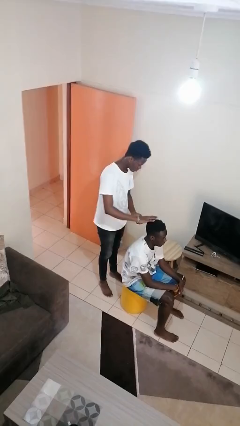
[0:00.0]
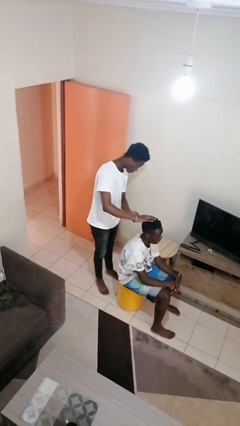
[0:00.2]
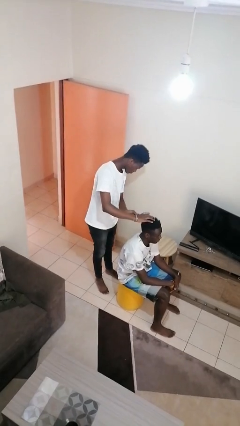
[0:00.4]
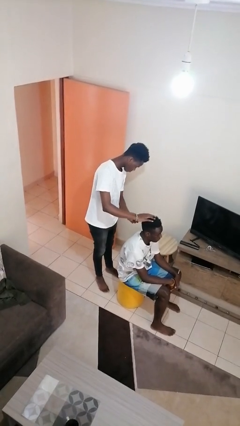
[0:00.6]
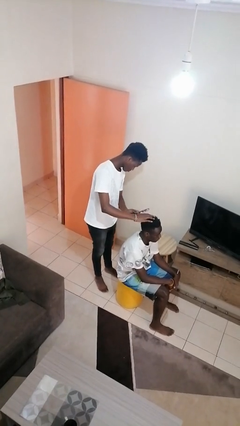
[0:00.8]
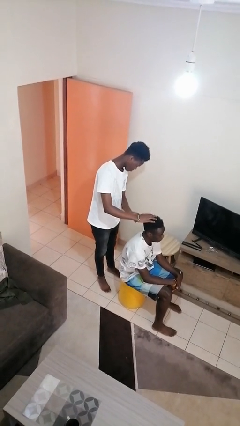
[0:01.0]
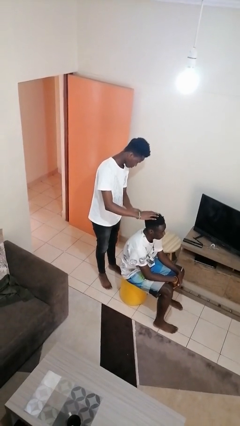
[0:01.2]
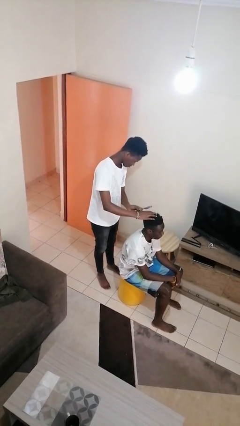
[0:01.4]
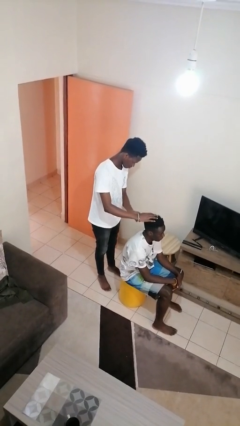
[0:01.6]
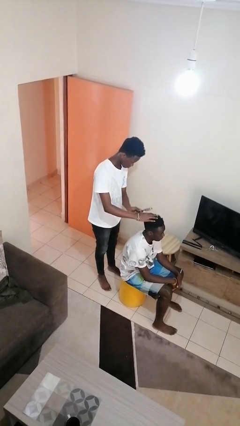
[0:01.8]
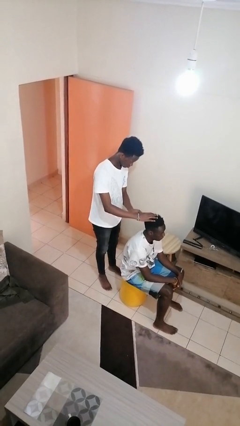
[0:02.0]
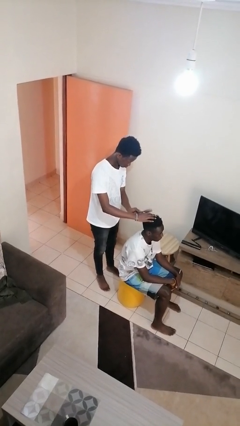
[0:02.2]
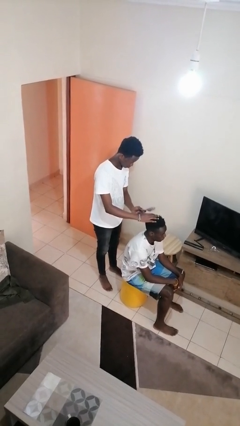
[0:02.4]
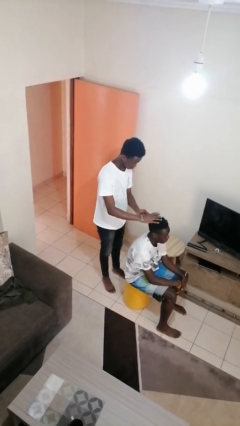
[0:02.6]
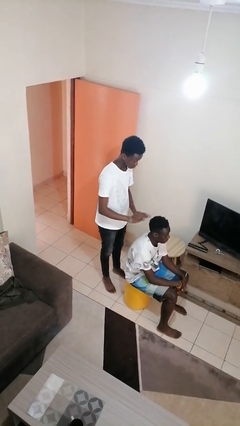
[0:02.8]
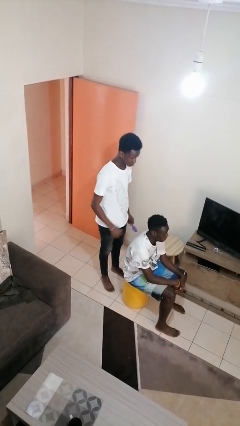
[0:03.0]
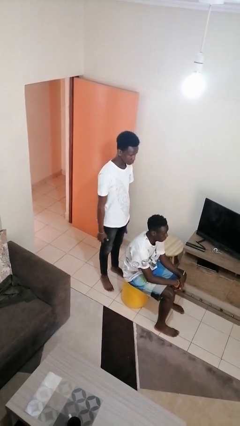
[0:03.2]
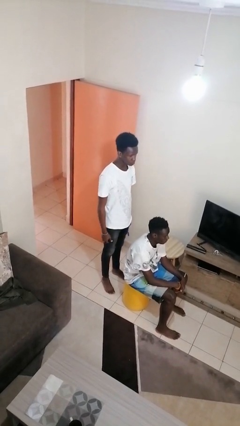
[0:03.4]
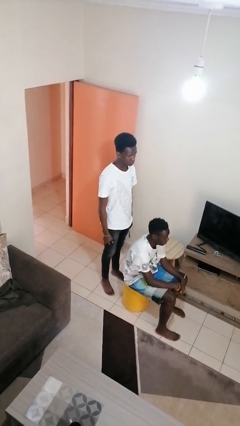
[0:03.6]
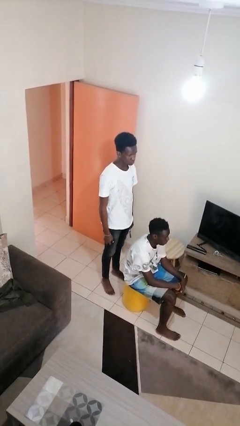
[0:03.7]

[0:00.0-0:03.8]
person brushes hair of person

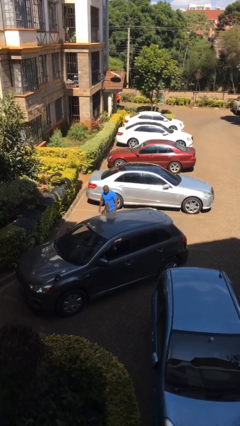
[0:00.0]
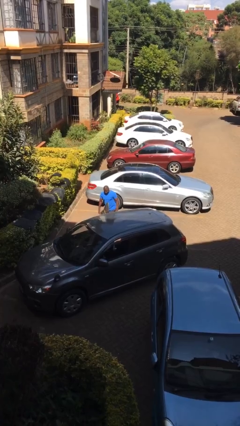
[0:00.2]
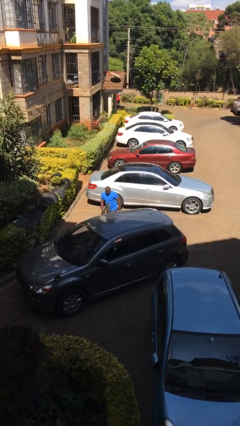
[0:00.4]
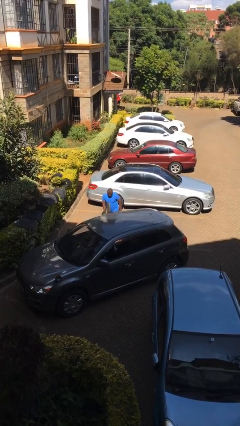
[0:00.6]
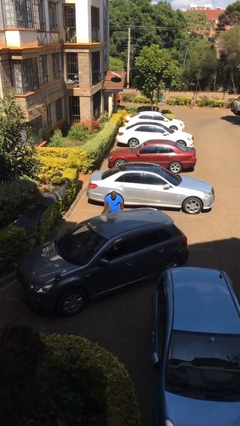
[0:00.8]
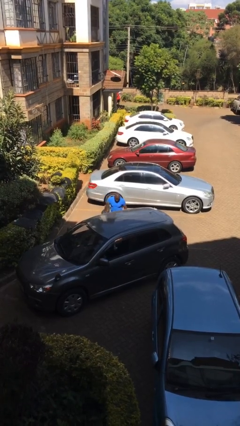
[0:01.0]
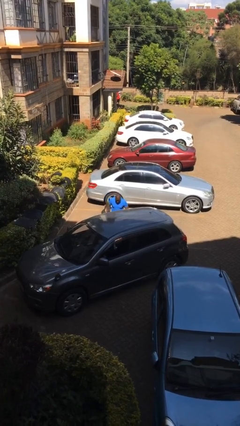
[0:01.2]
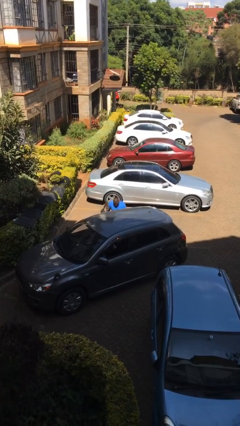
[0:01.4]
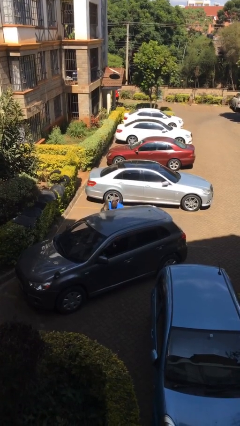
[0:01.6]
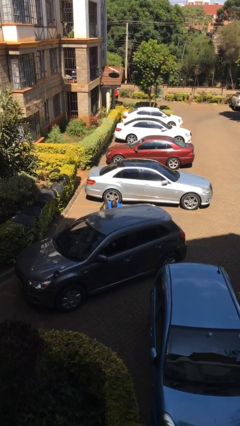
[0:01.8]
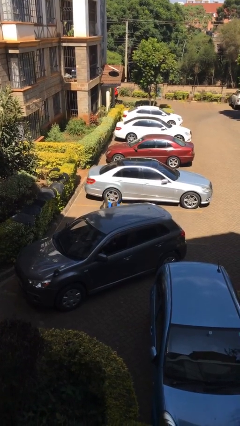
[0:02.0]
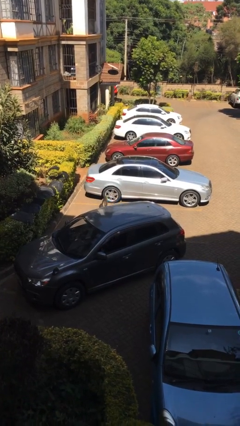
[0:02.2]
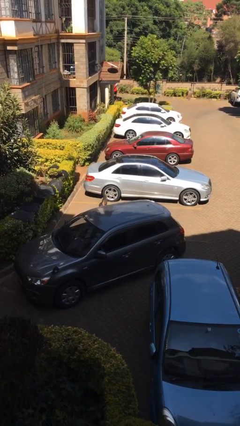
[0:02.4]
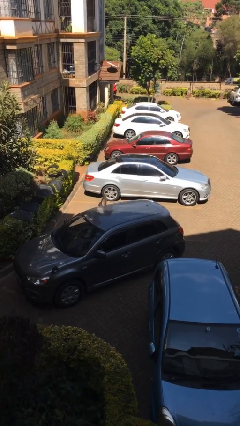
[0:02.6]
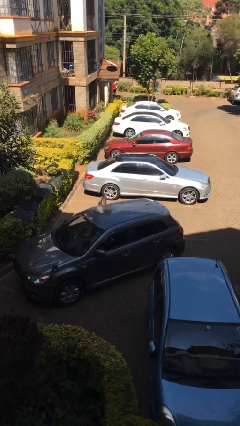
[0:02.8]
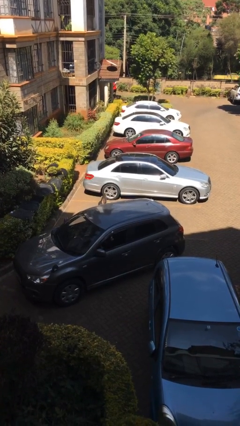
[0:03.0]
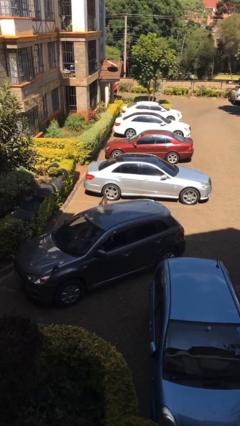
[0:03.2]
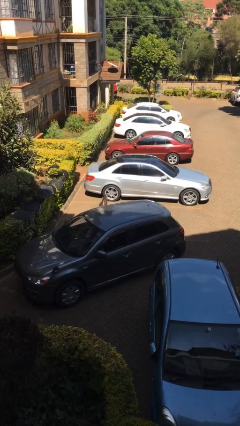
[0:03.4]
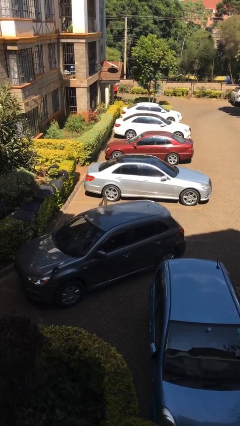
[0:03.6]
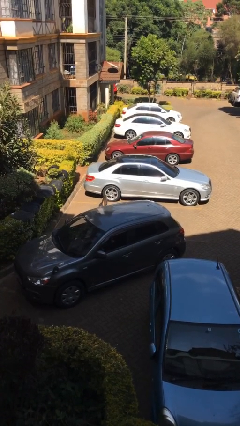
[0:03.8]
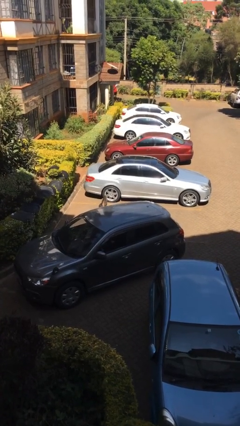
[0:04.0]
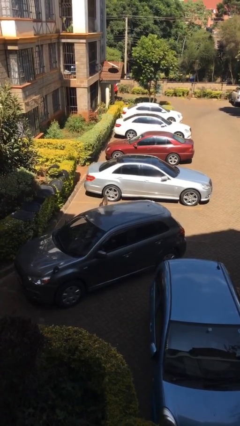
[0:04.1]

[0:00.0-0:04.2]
person enters car

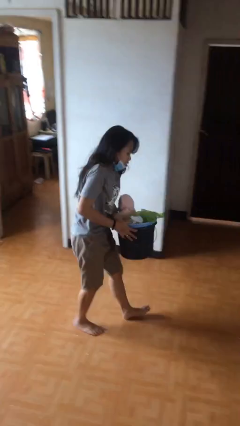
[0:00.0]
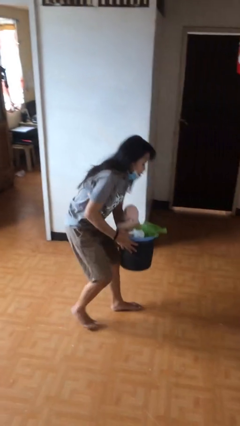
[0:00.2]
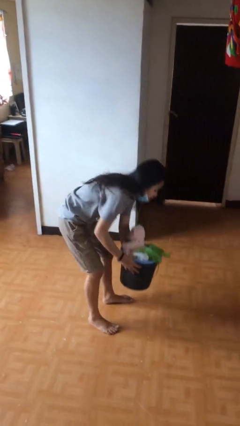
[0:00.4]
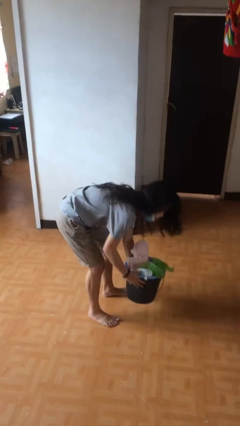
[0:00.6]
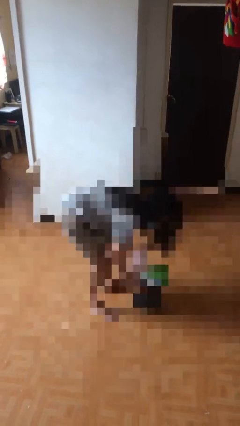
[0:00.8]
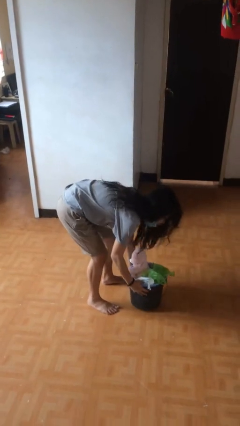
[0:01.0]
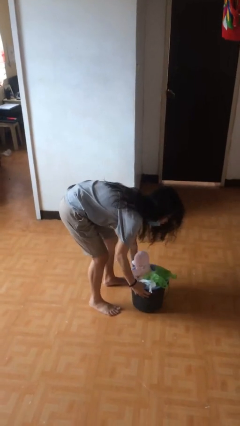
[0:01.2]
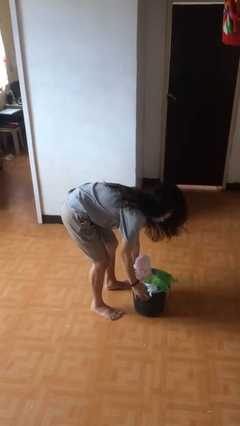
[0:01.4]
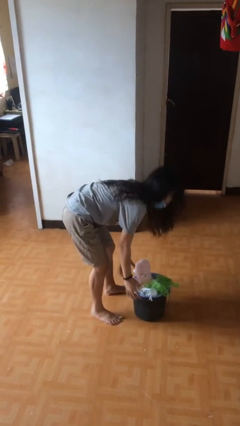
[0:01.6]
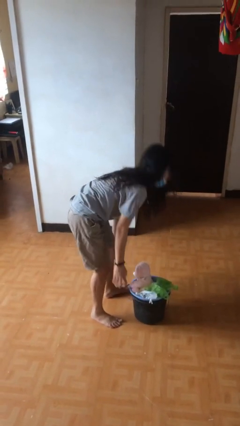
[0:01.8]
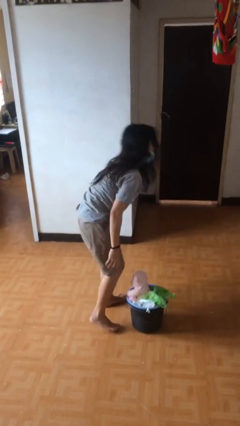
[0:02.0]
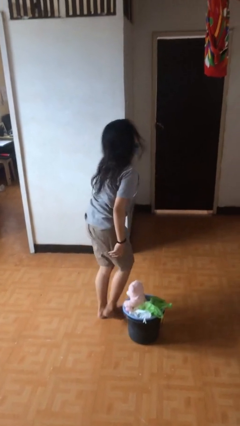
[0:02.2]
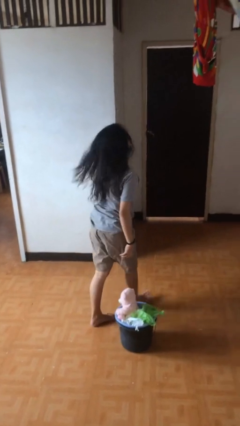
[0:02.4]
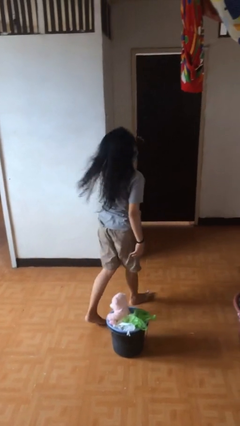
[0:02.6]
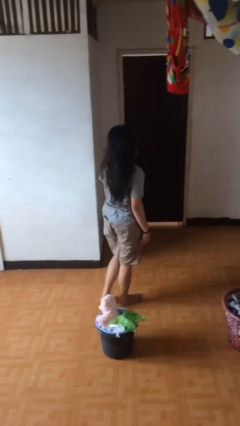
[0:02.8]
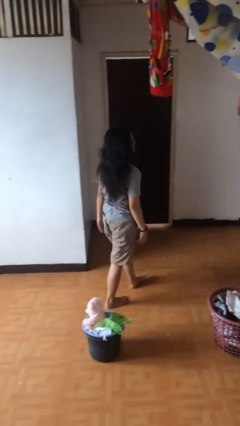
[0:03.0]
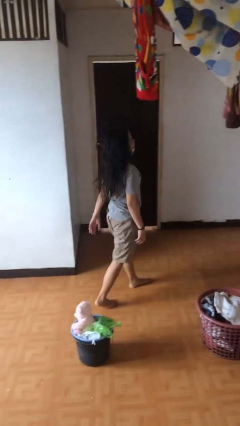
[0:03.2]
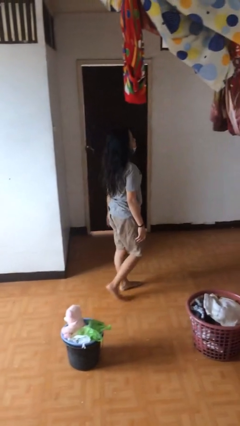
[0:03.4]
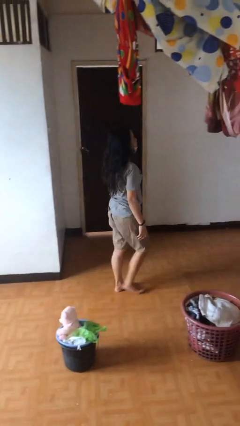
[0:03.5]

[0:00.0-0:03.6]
person puts down object on floor

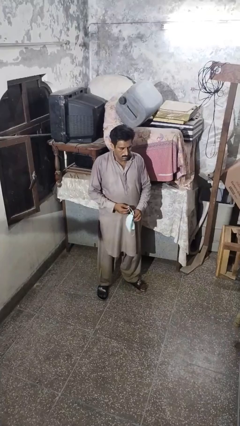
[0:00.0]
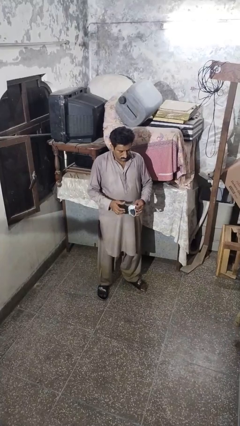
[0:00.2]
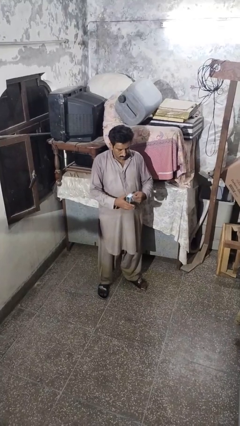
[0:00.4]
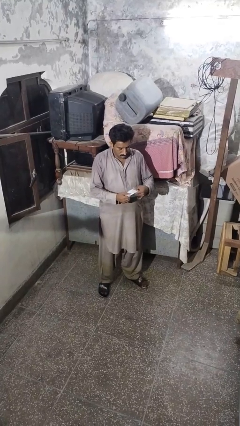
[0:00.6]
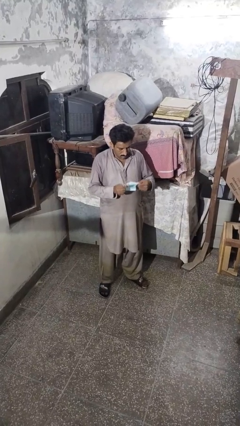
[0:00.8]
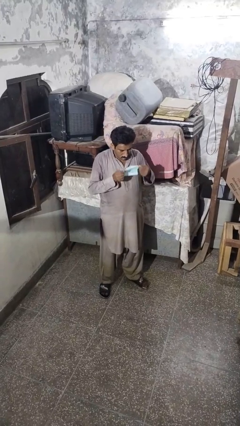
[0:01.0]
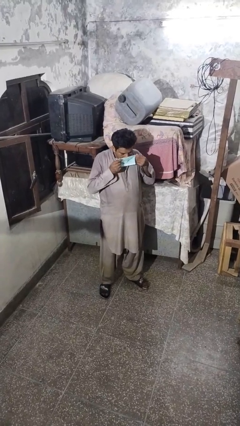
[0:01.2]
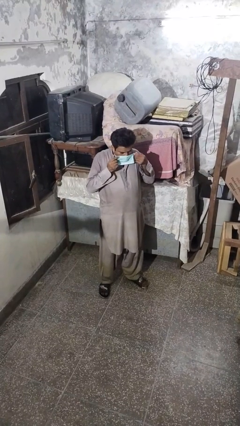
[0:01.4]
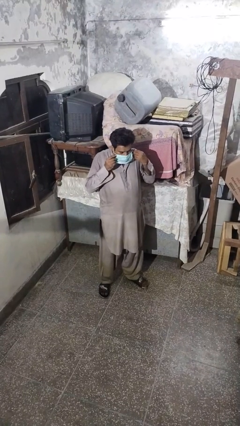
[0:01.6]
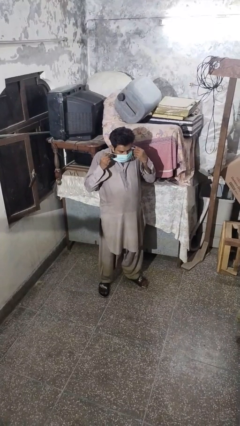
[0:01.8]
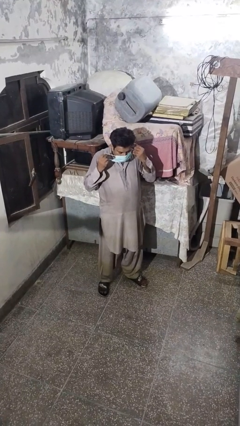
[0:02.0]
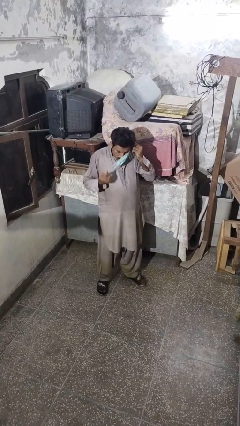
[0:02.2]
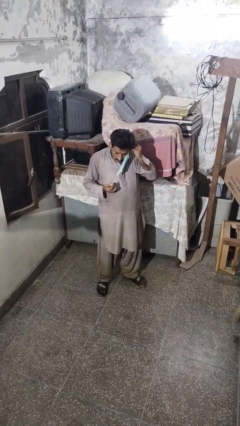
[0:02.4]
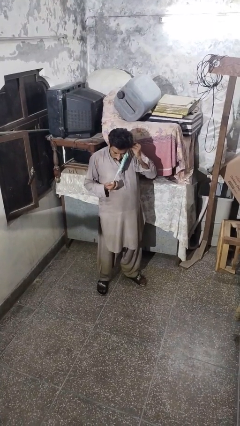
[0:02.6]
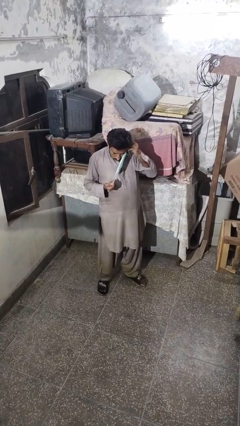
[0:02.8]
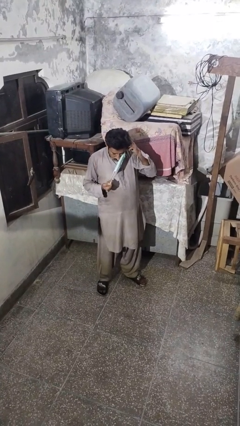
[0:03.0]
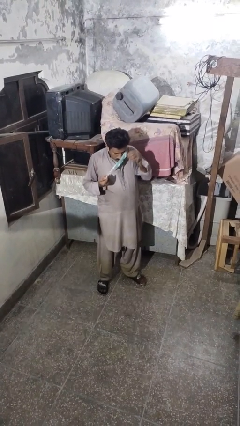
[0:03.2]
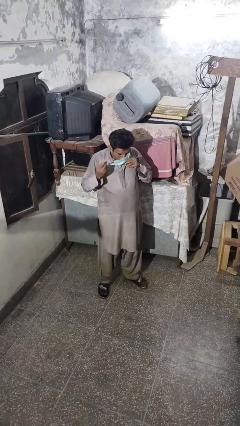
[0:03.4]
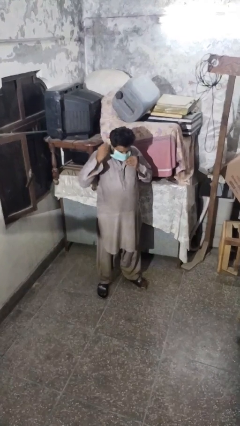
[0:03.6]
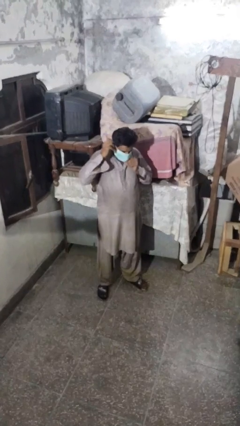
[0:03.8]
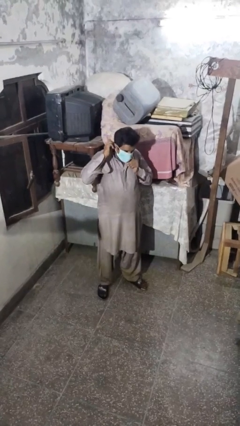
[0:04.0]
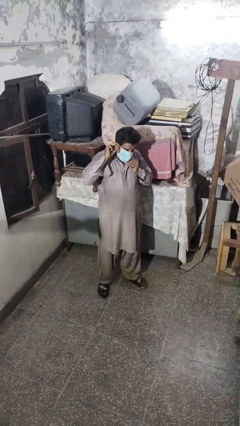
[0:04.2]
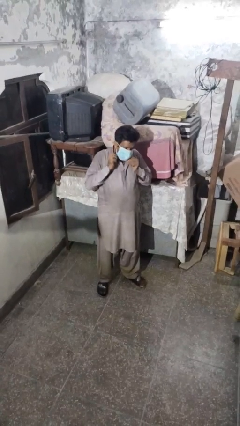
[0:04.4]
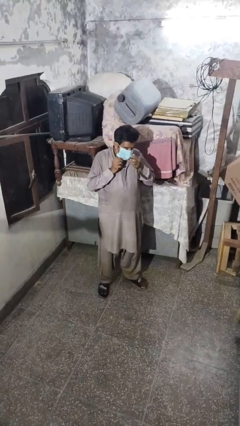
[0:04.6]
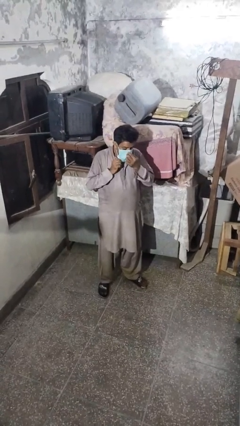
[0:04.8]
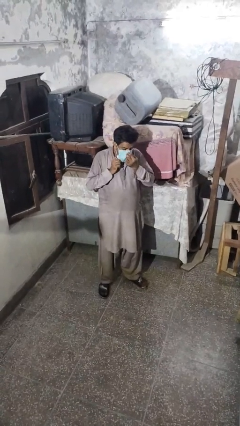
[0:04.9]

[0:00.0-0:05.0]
person puts on facemask

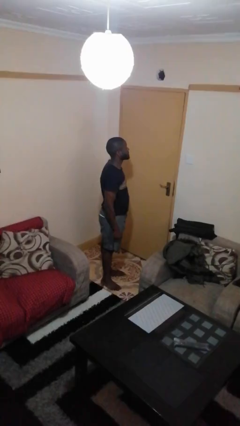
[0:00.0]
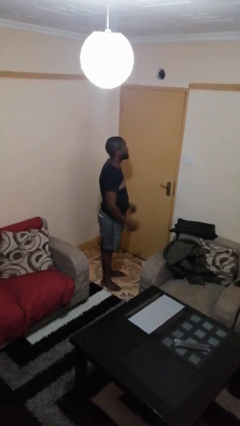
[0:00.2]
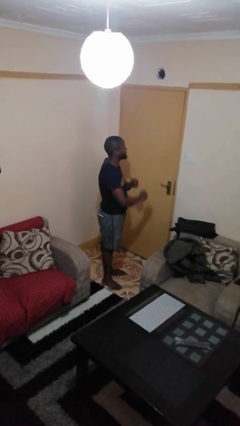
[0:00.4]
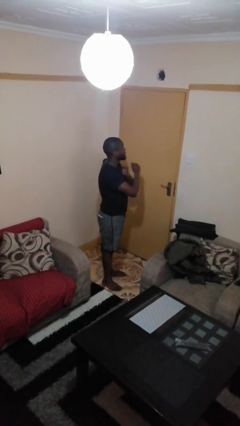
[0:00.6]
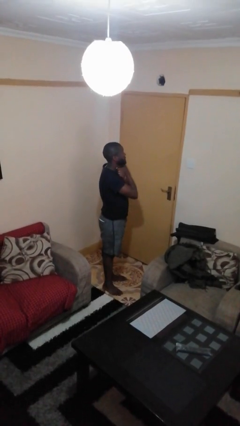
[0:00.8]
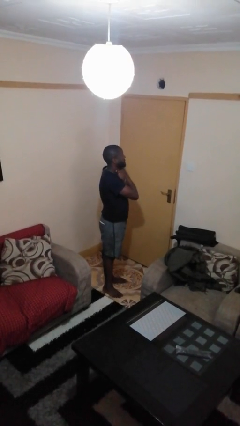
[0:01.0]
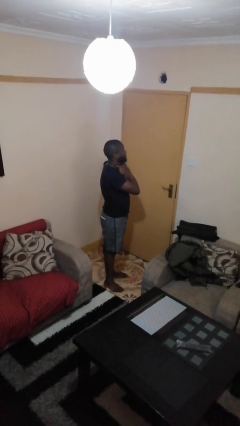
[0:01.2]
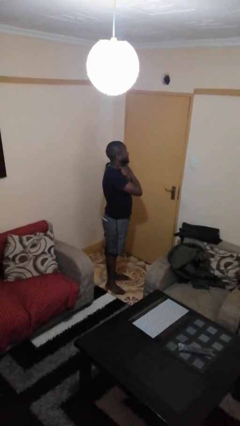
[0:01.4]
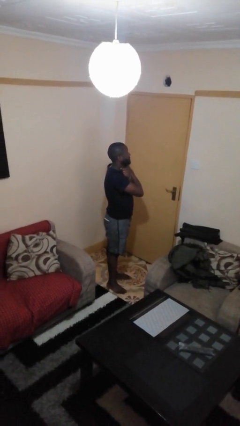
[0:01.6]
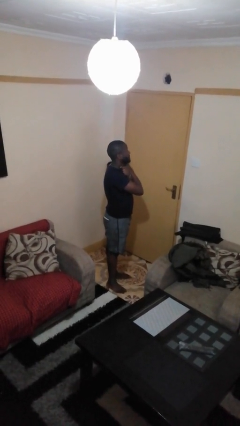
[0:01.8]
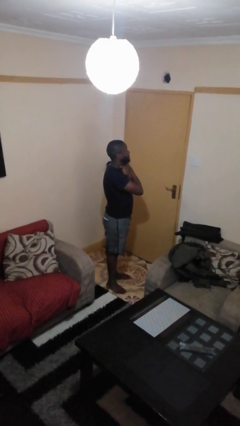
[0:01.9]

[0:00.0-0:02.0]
person gestures arms x
